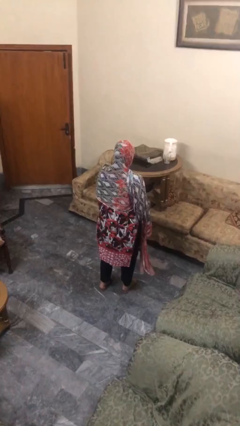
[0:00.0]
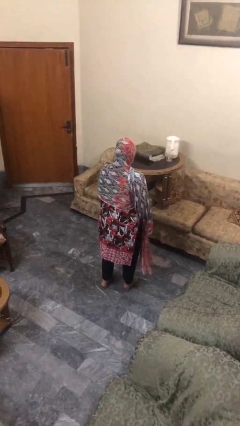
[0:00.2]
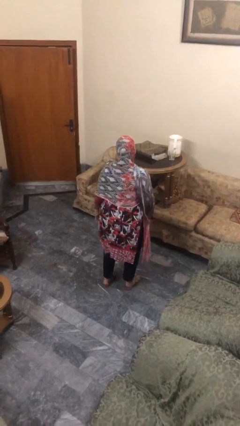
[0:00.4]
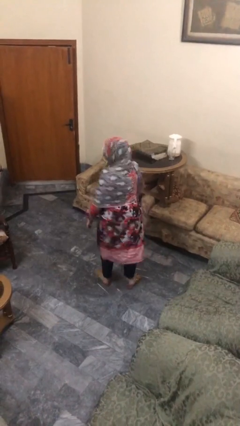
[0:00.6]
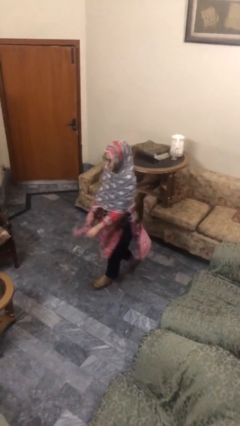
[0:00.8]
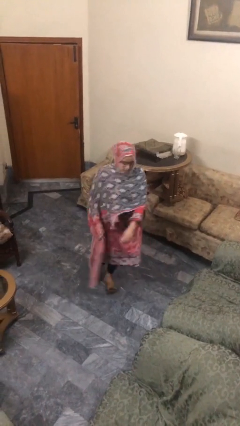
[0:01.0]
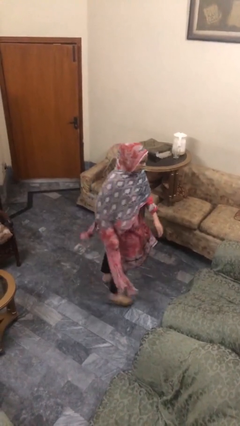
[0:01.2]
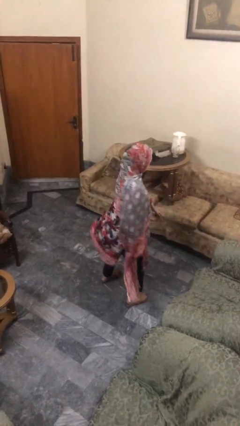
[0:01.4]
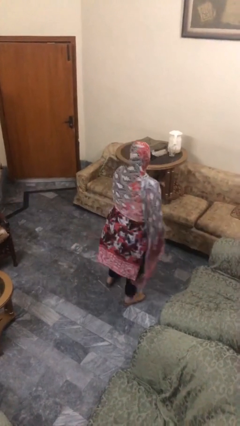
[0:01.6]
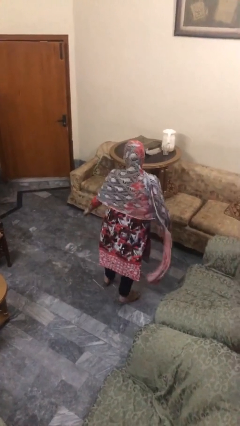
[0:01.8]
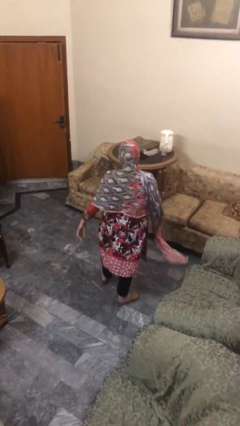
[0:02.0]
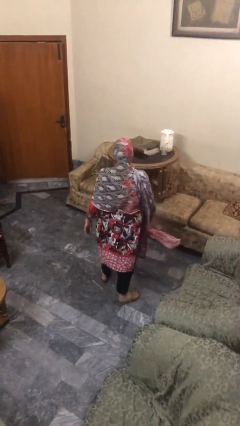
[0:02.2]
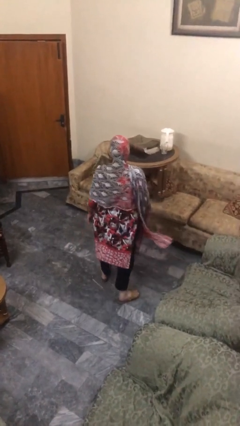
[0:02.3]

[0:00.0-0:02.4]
person twirls

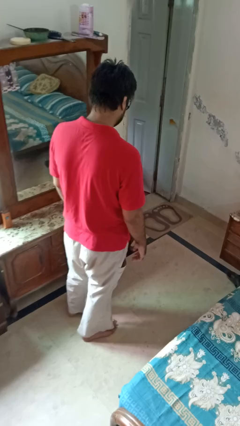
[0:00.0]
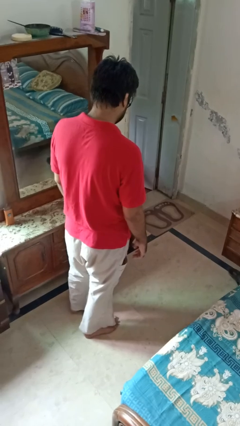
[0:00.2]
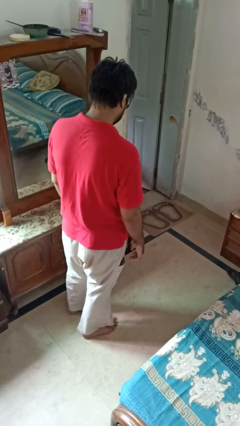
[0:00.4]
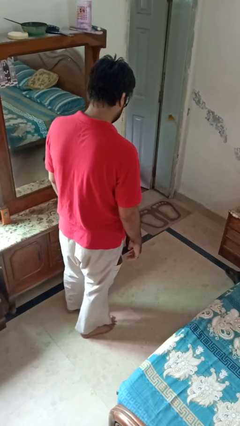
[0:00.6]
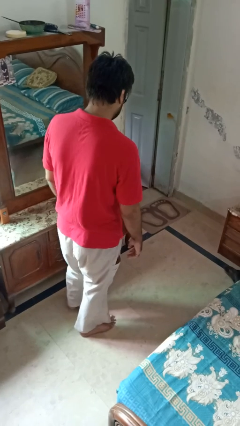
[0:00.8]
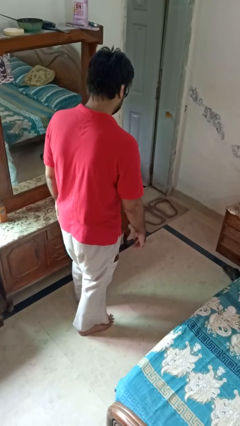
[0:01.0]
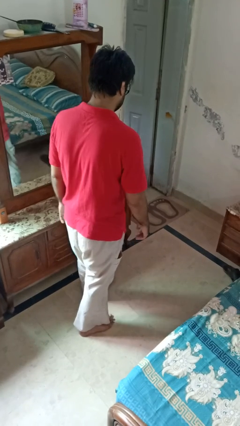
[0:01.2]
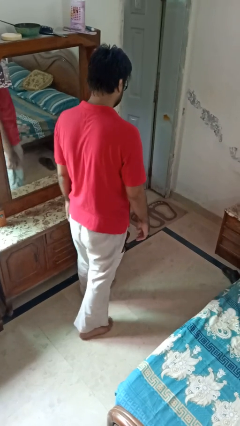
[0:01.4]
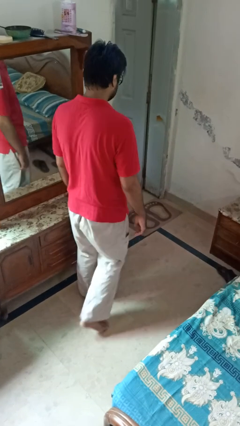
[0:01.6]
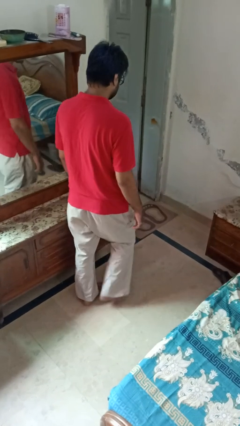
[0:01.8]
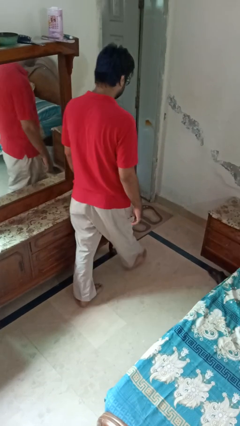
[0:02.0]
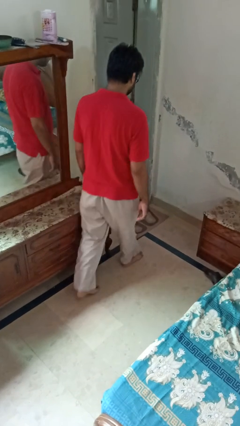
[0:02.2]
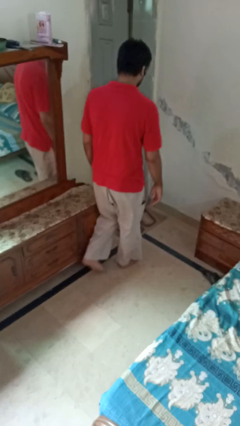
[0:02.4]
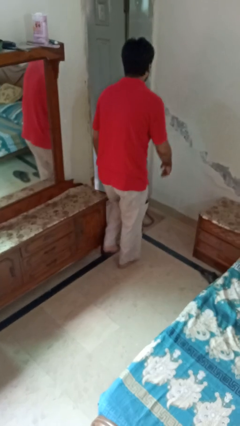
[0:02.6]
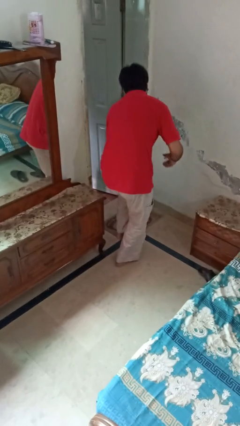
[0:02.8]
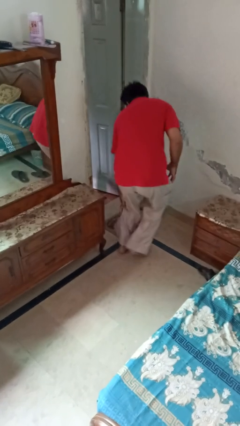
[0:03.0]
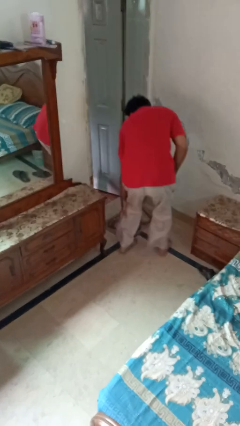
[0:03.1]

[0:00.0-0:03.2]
person stubs toe

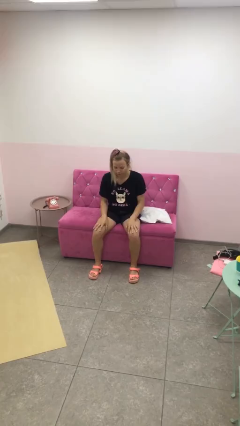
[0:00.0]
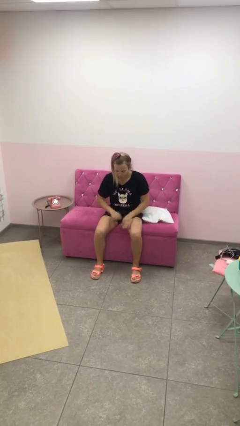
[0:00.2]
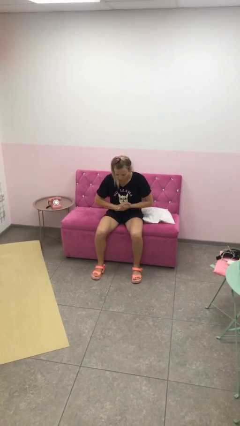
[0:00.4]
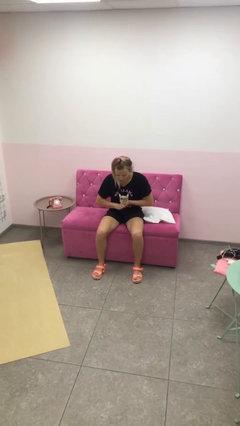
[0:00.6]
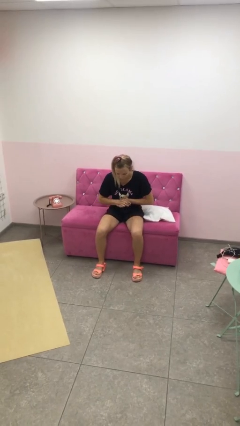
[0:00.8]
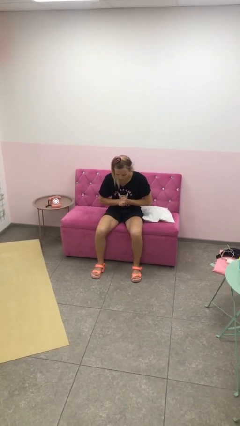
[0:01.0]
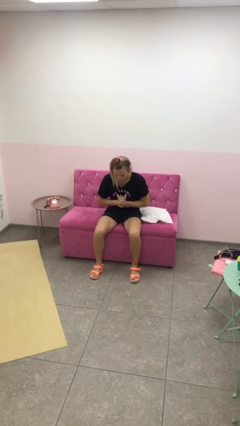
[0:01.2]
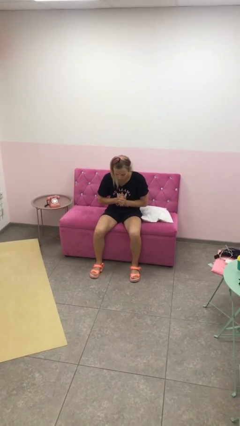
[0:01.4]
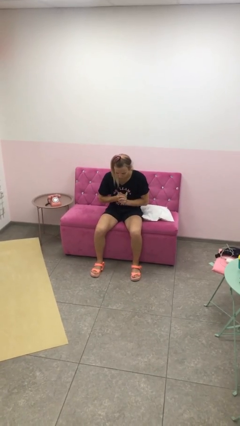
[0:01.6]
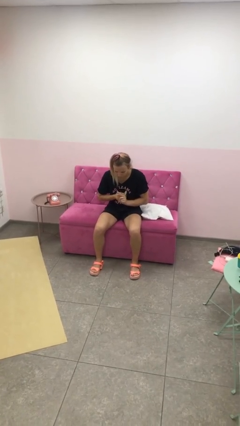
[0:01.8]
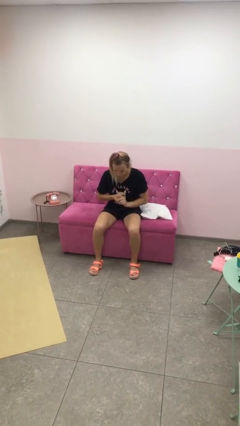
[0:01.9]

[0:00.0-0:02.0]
person looks at hands in lap

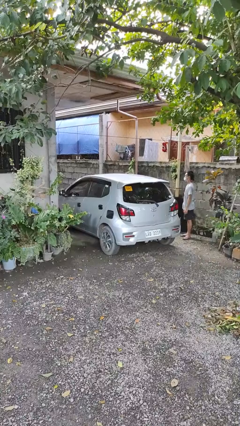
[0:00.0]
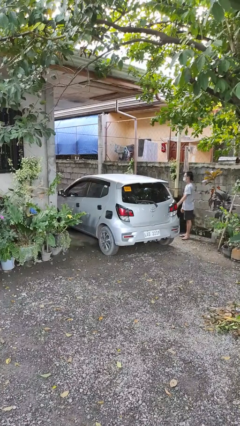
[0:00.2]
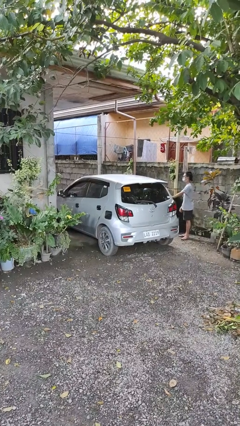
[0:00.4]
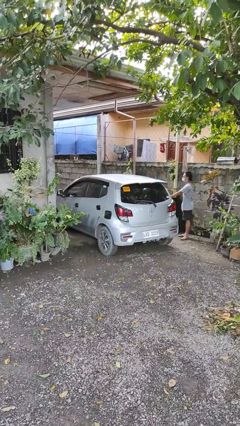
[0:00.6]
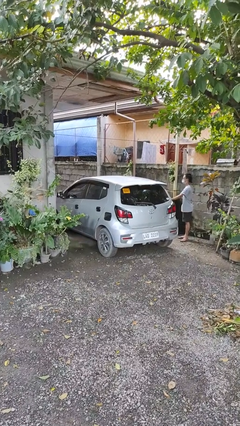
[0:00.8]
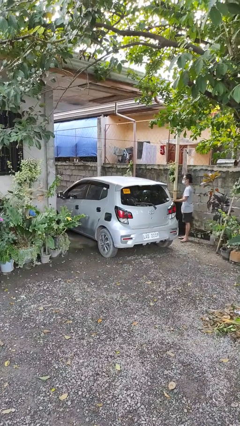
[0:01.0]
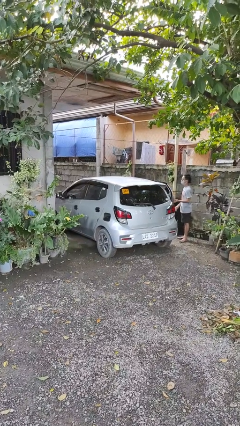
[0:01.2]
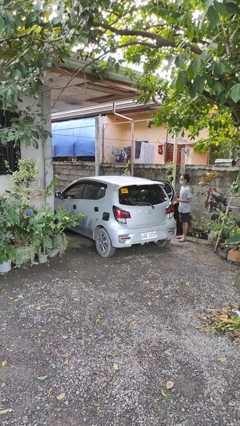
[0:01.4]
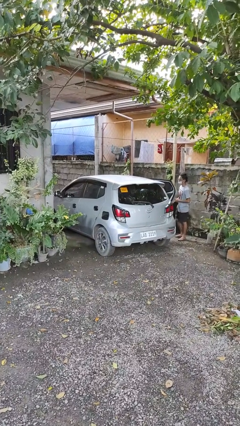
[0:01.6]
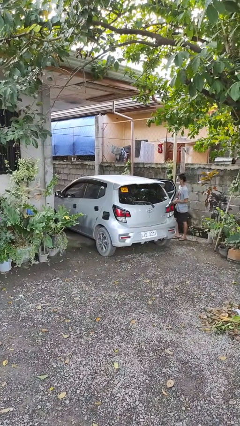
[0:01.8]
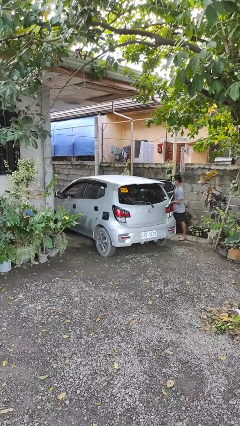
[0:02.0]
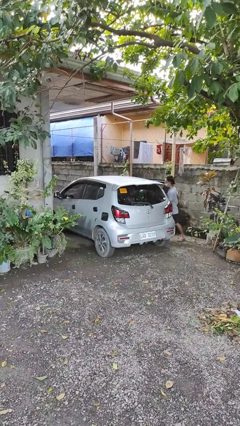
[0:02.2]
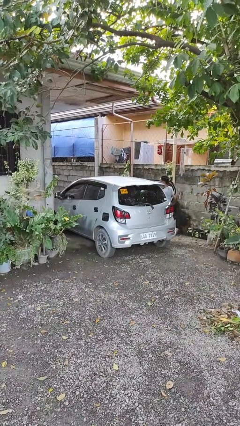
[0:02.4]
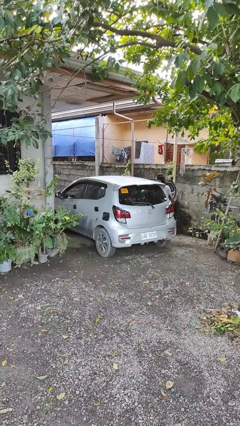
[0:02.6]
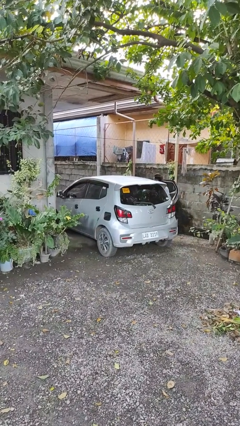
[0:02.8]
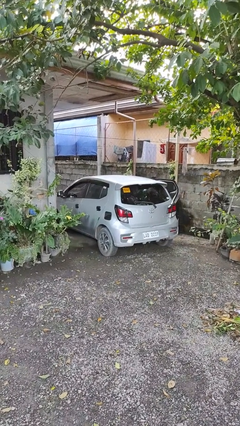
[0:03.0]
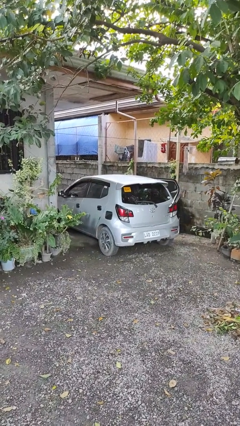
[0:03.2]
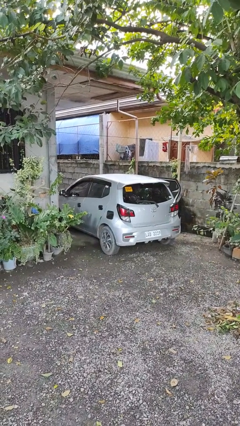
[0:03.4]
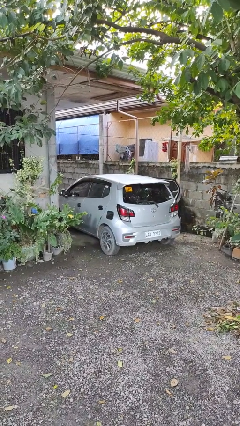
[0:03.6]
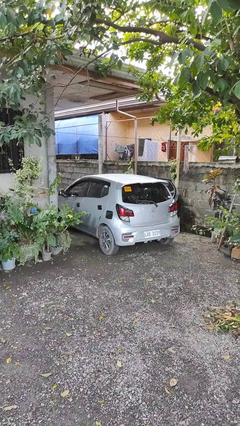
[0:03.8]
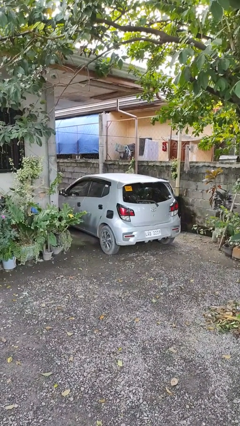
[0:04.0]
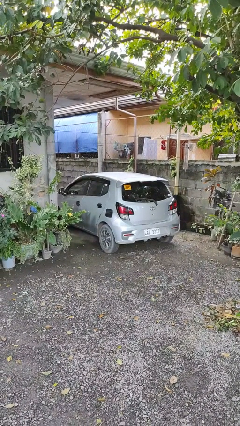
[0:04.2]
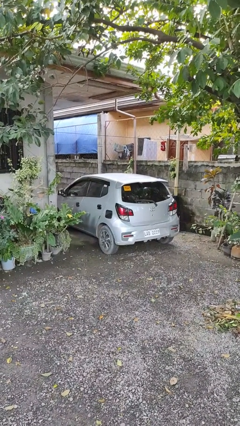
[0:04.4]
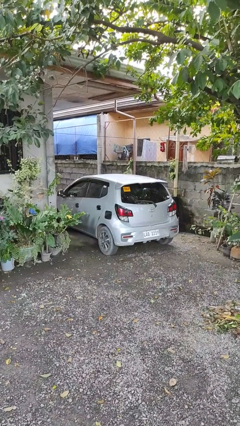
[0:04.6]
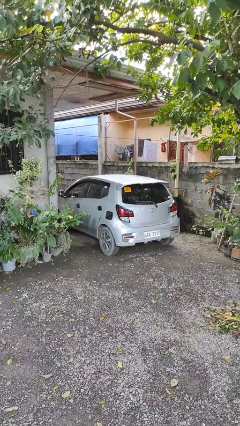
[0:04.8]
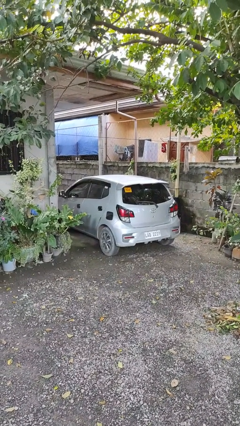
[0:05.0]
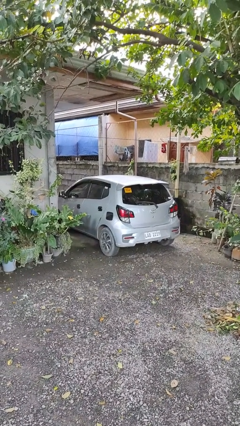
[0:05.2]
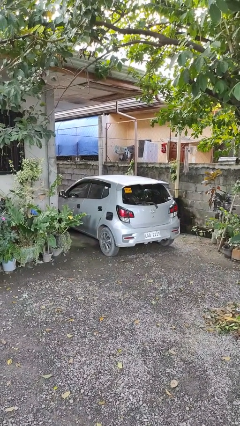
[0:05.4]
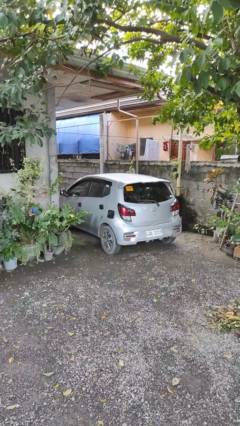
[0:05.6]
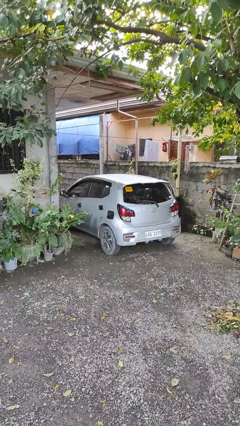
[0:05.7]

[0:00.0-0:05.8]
car picks up person

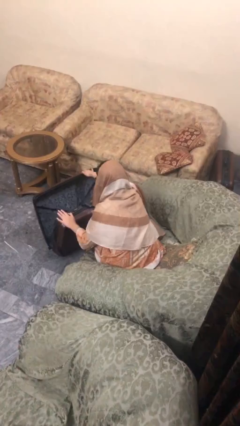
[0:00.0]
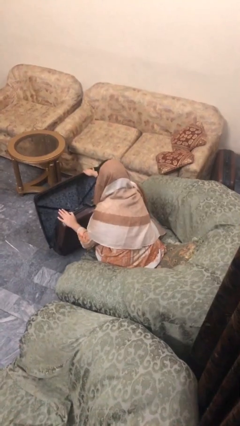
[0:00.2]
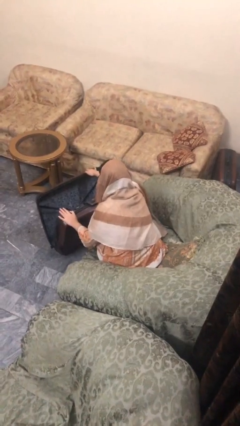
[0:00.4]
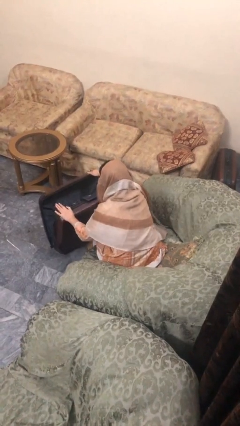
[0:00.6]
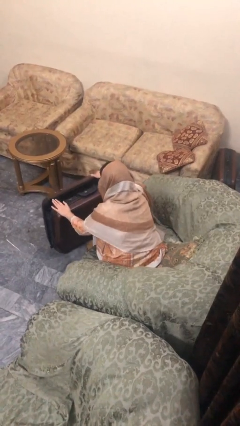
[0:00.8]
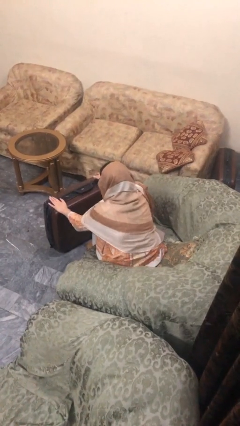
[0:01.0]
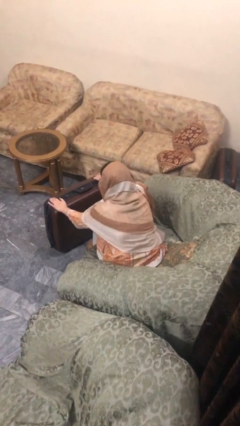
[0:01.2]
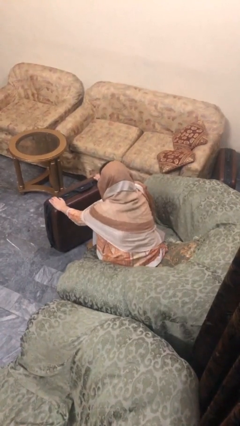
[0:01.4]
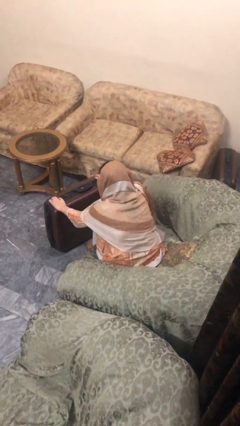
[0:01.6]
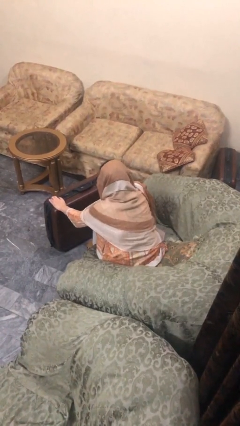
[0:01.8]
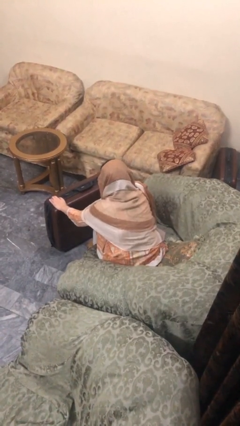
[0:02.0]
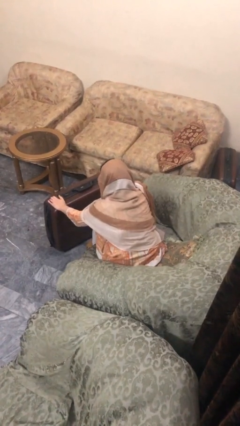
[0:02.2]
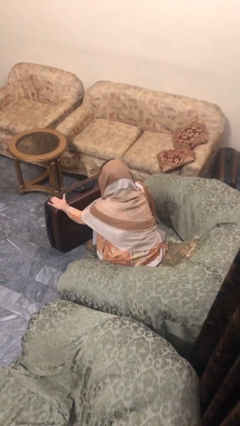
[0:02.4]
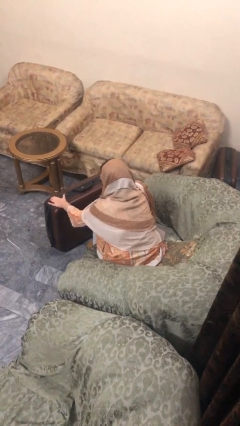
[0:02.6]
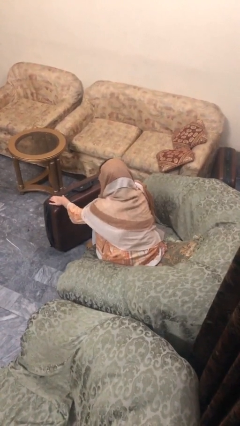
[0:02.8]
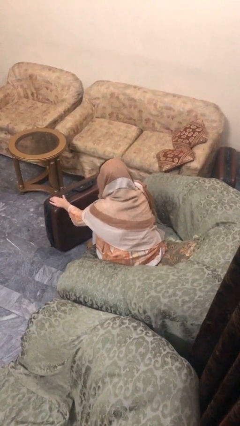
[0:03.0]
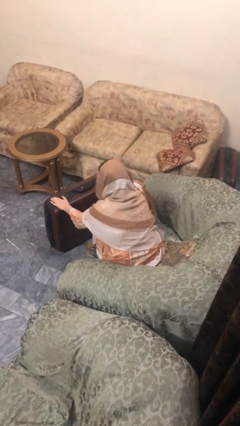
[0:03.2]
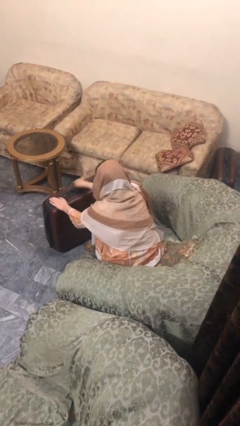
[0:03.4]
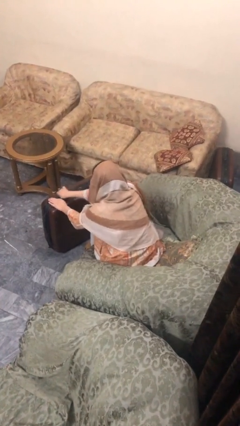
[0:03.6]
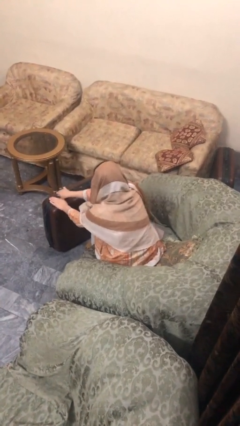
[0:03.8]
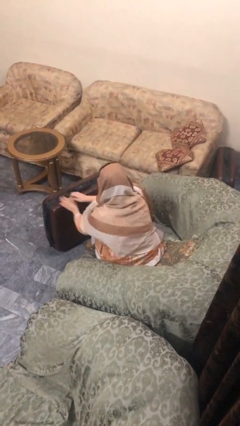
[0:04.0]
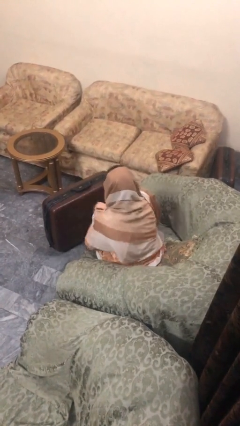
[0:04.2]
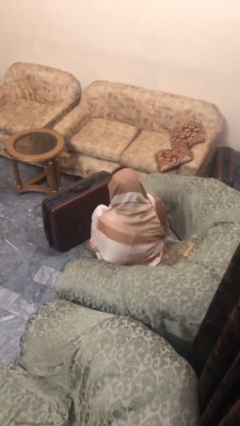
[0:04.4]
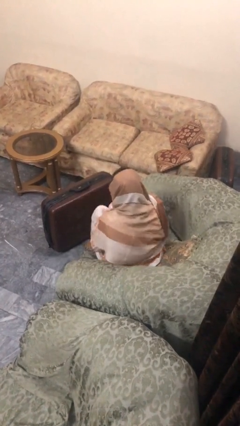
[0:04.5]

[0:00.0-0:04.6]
person closes suitcase
